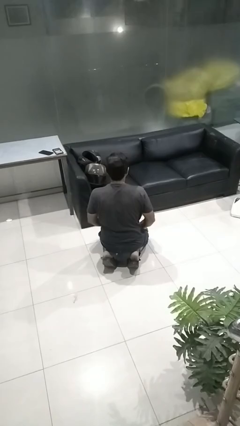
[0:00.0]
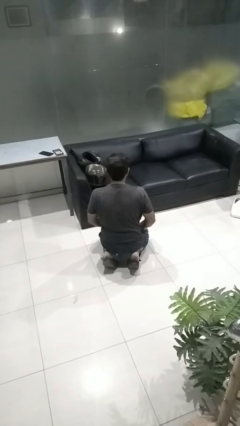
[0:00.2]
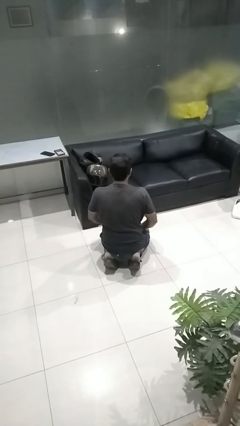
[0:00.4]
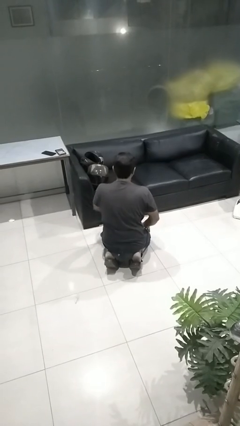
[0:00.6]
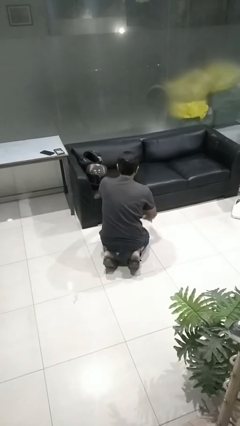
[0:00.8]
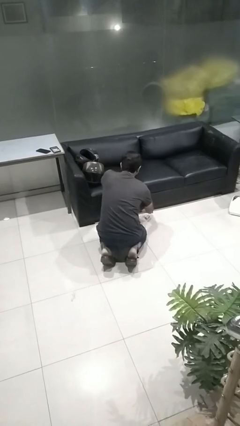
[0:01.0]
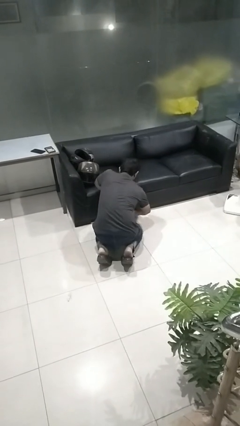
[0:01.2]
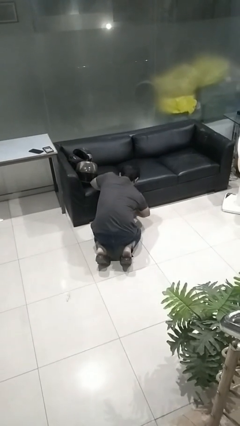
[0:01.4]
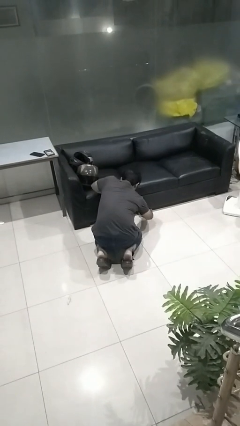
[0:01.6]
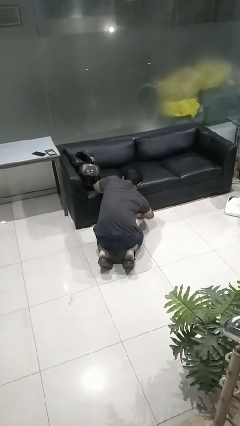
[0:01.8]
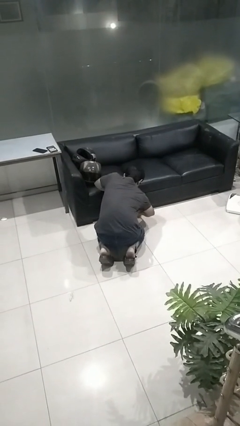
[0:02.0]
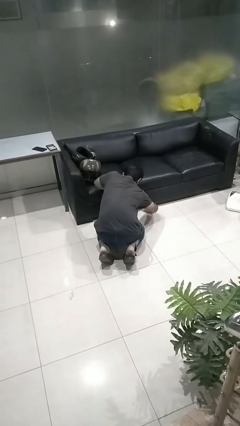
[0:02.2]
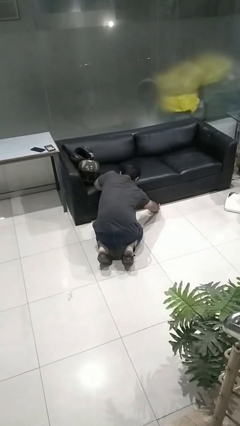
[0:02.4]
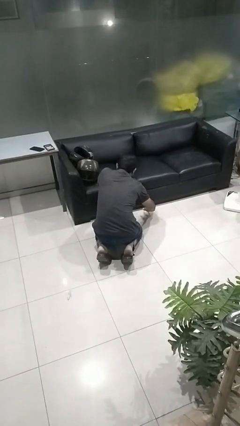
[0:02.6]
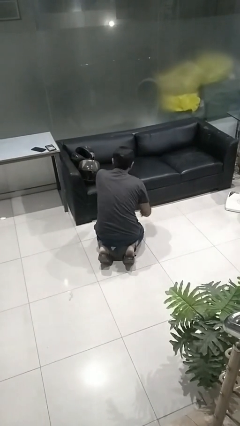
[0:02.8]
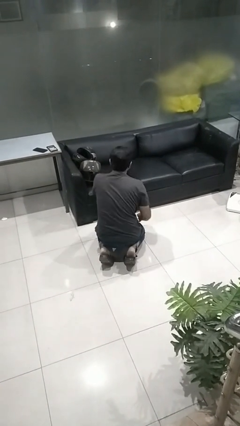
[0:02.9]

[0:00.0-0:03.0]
person searches under couch

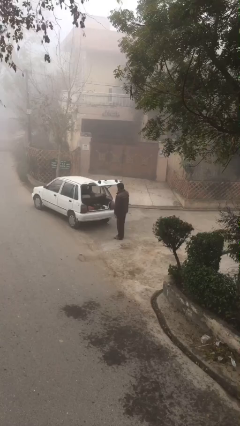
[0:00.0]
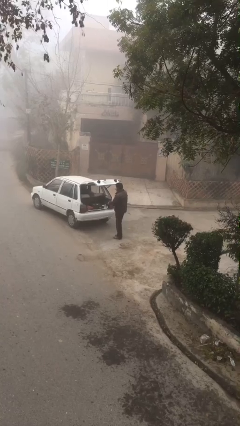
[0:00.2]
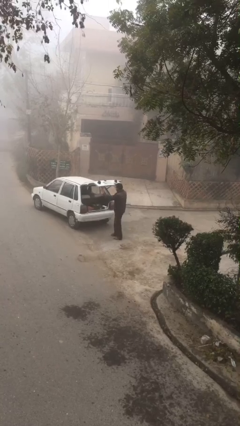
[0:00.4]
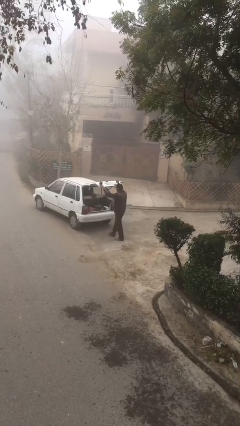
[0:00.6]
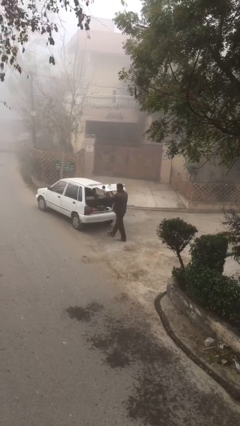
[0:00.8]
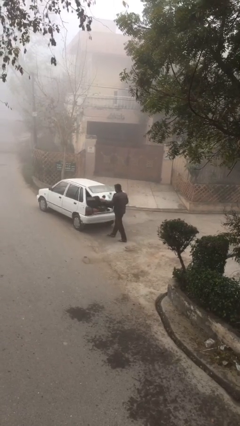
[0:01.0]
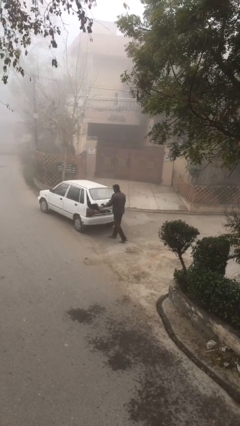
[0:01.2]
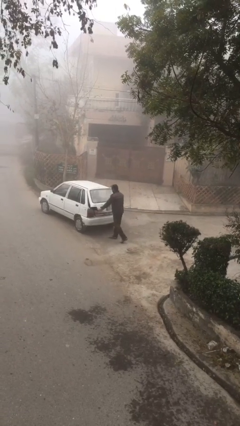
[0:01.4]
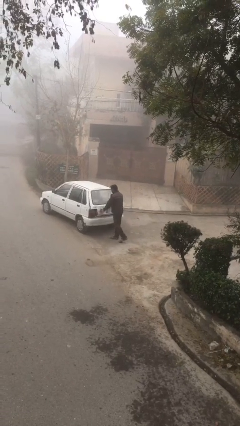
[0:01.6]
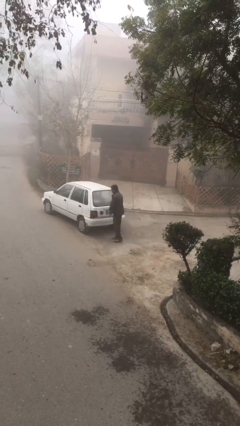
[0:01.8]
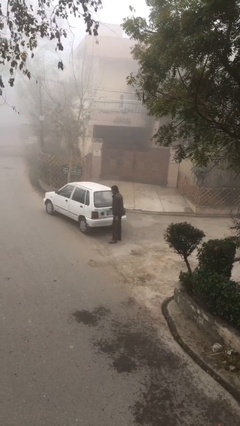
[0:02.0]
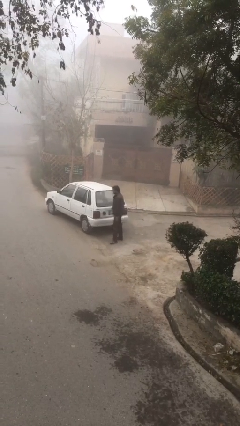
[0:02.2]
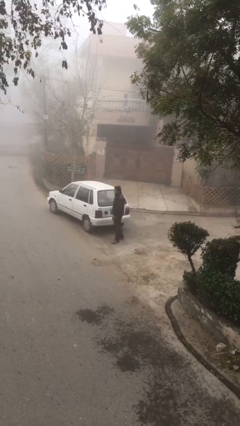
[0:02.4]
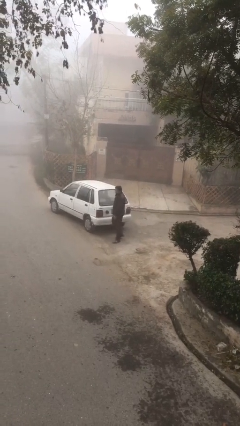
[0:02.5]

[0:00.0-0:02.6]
person closes car trunk

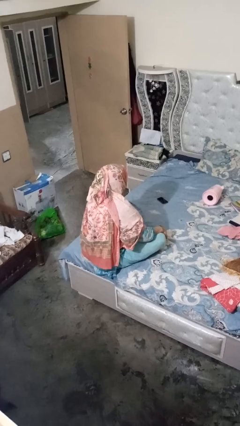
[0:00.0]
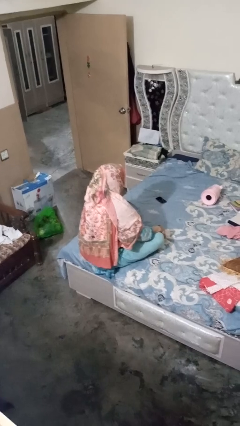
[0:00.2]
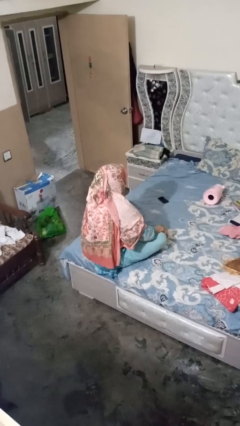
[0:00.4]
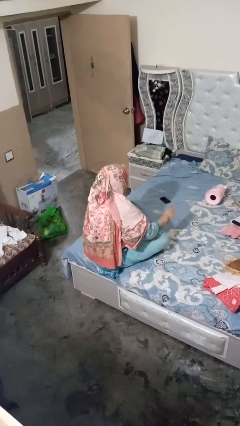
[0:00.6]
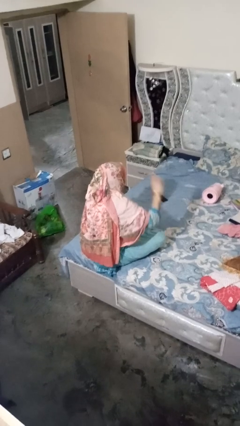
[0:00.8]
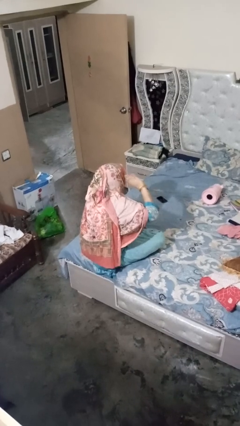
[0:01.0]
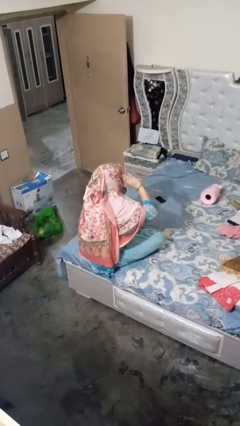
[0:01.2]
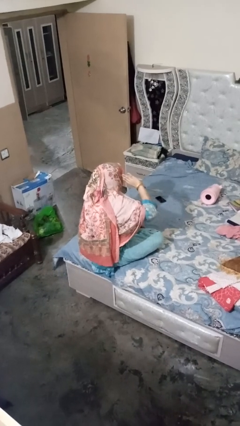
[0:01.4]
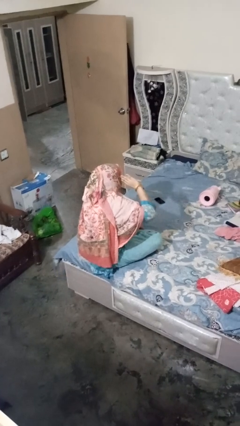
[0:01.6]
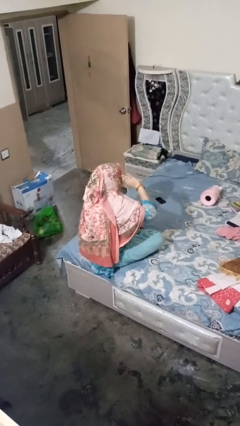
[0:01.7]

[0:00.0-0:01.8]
person salutes

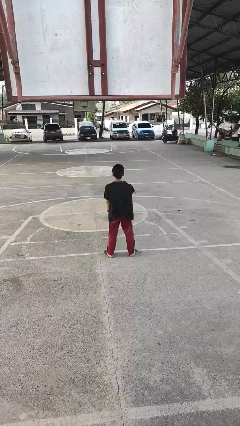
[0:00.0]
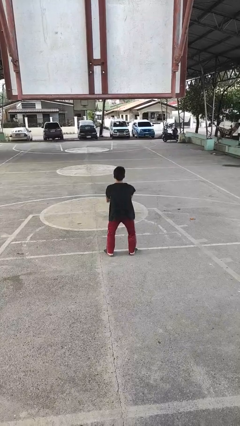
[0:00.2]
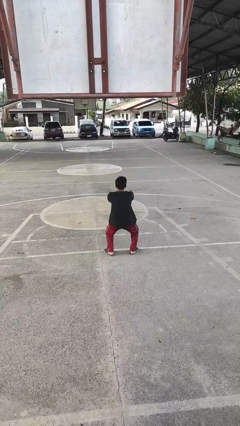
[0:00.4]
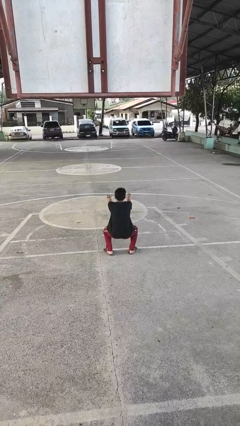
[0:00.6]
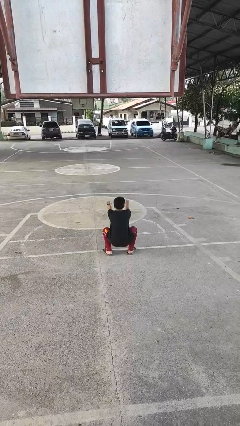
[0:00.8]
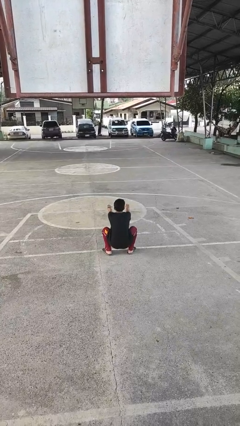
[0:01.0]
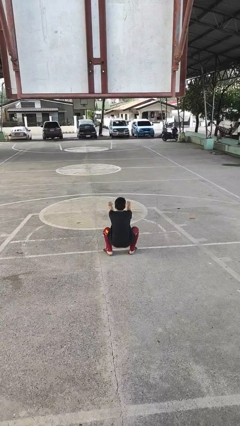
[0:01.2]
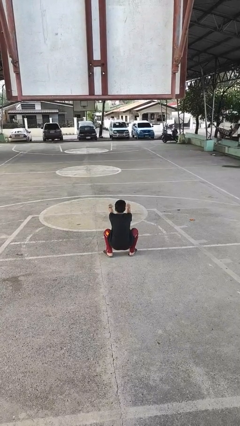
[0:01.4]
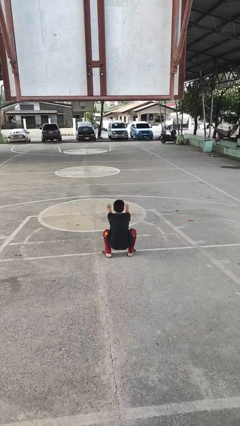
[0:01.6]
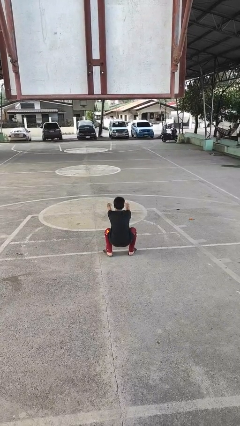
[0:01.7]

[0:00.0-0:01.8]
person squats

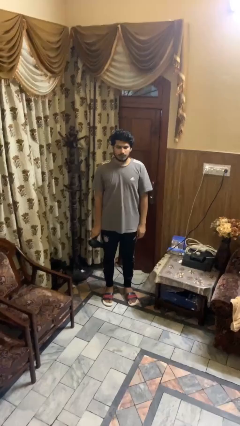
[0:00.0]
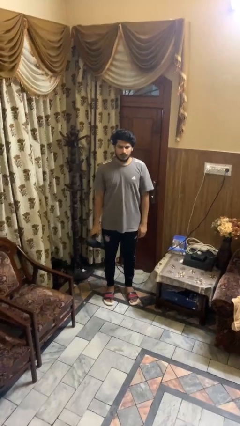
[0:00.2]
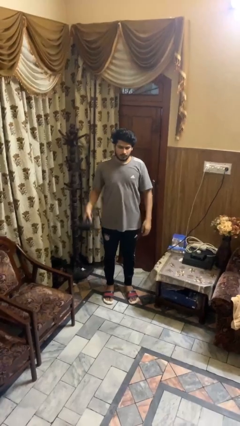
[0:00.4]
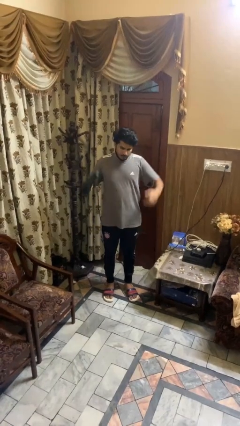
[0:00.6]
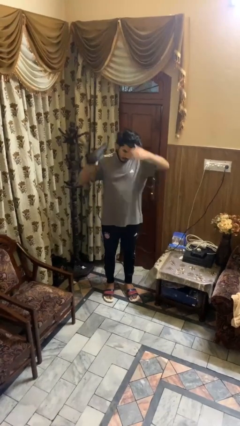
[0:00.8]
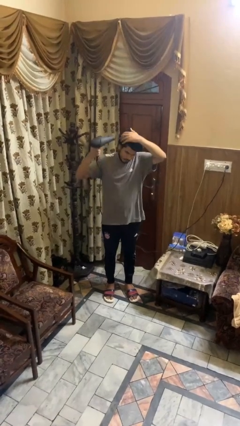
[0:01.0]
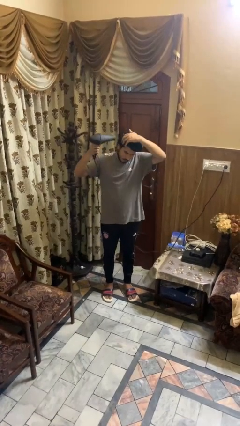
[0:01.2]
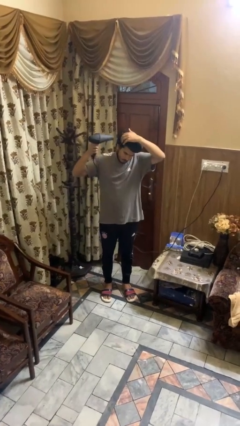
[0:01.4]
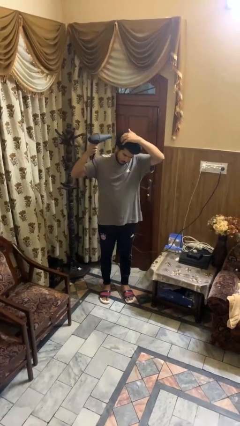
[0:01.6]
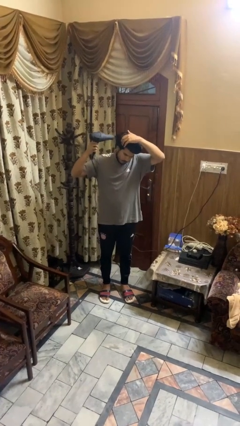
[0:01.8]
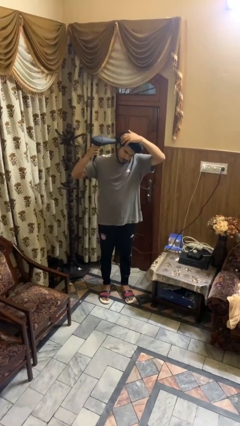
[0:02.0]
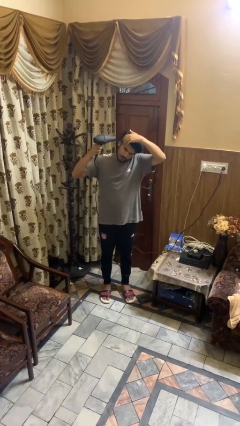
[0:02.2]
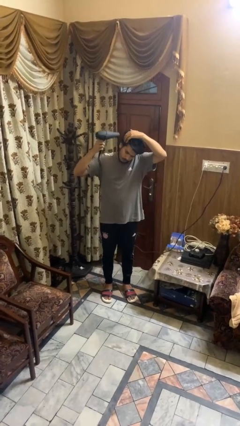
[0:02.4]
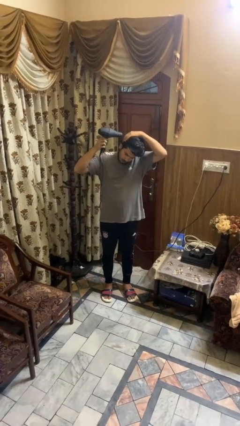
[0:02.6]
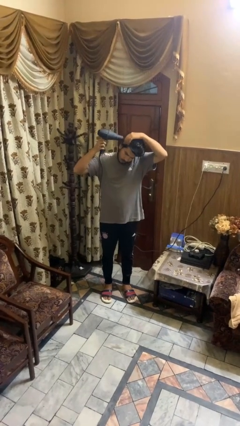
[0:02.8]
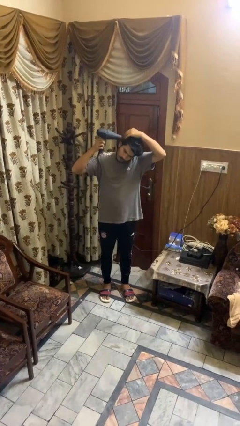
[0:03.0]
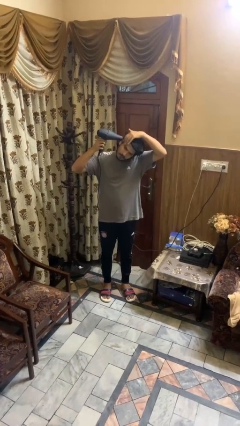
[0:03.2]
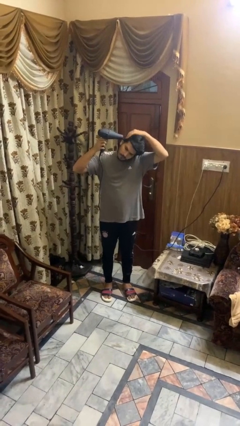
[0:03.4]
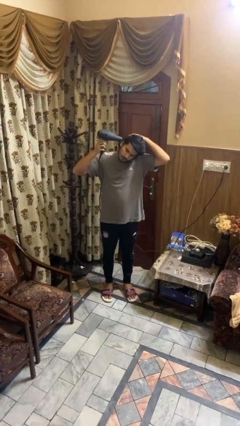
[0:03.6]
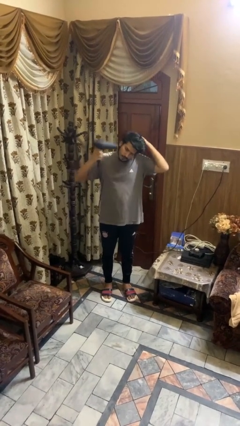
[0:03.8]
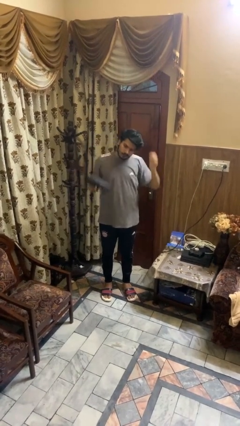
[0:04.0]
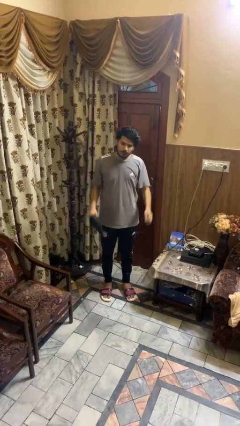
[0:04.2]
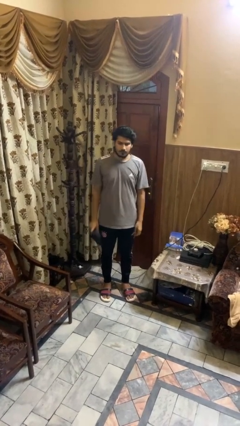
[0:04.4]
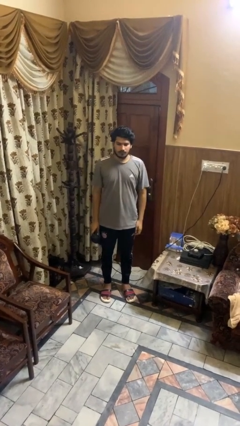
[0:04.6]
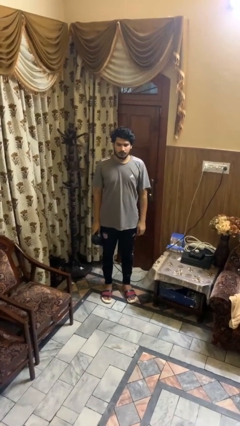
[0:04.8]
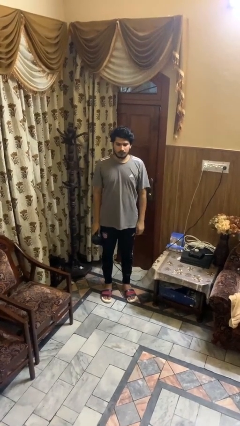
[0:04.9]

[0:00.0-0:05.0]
person dries hair with hairdryer

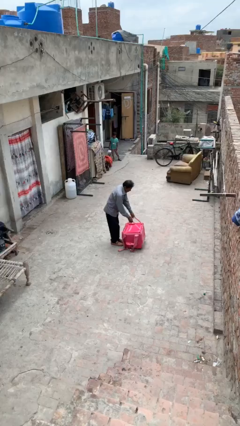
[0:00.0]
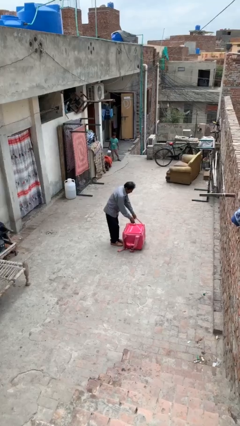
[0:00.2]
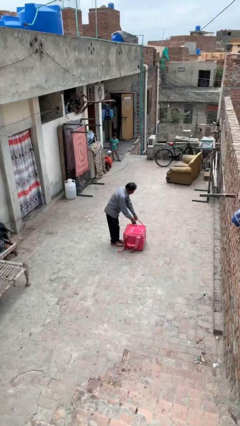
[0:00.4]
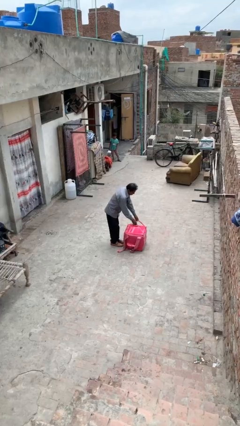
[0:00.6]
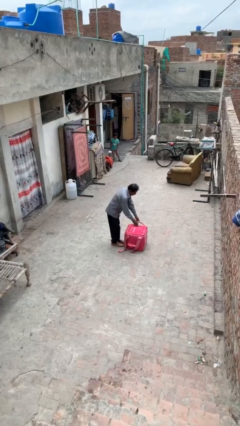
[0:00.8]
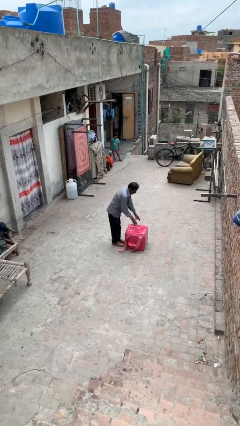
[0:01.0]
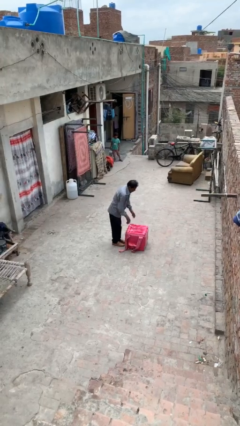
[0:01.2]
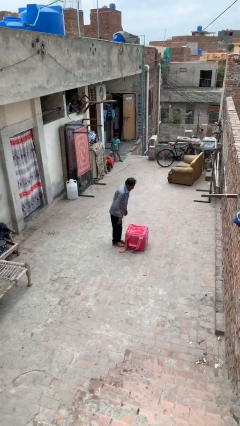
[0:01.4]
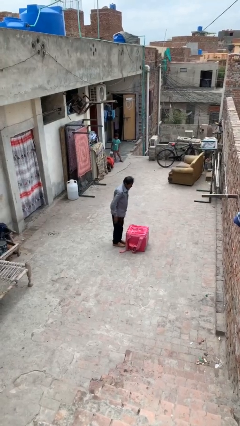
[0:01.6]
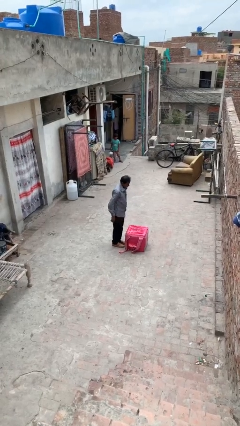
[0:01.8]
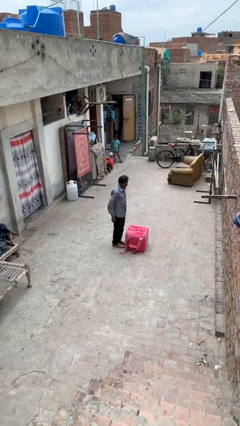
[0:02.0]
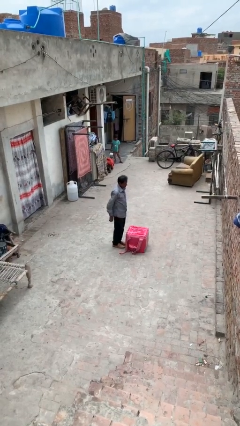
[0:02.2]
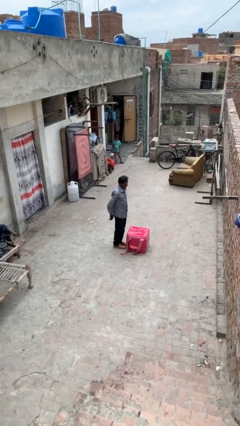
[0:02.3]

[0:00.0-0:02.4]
person puts down object on floor

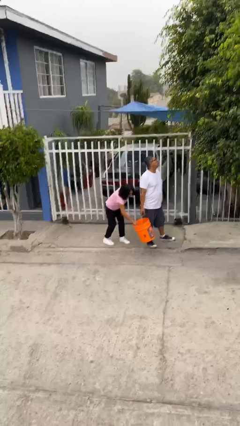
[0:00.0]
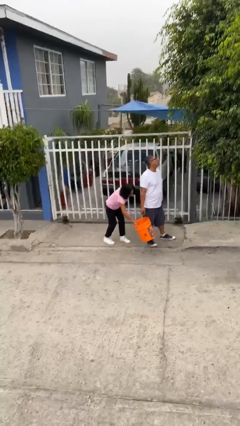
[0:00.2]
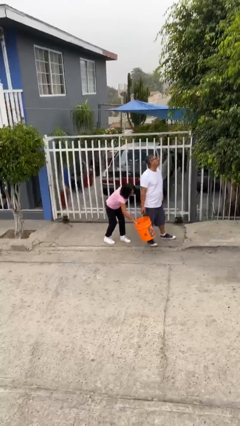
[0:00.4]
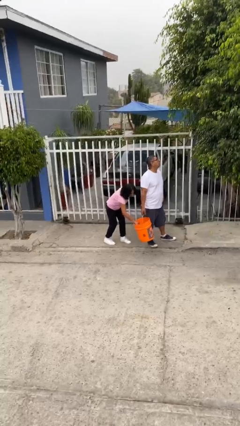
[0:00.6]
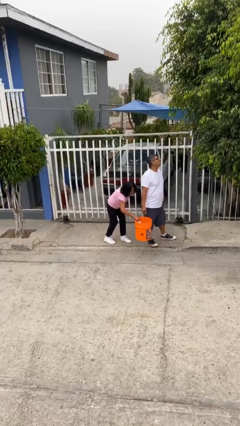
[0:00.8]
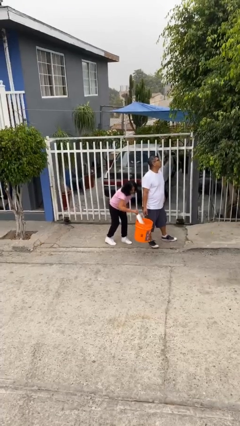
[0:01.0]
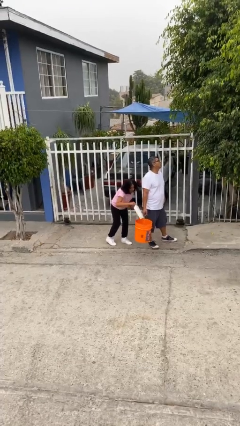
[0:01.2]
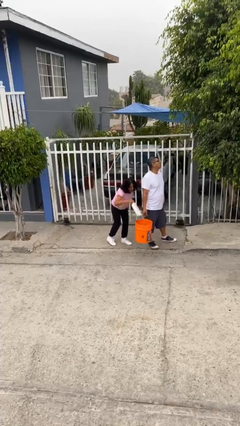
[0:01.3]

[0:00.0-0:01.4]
person steals object from person
